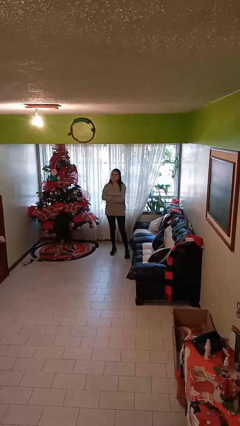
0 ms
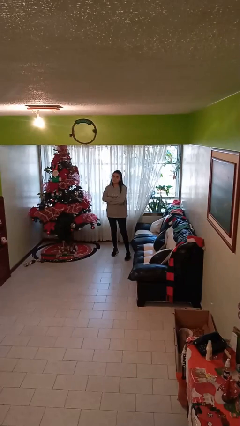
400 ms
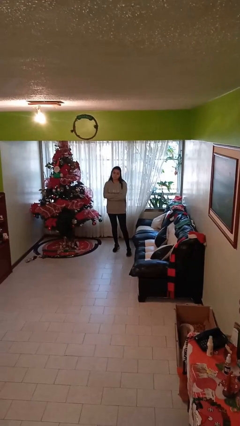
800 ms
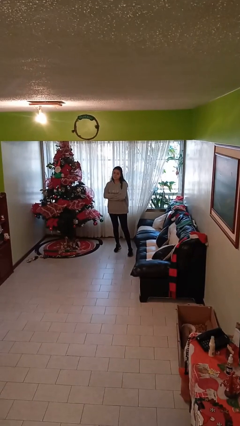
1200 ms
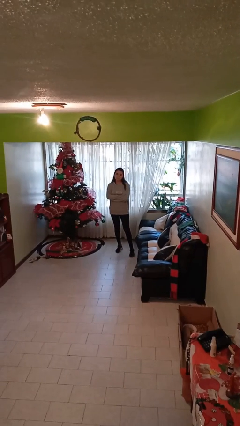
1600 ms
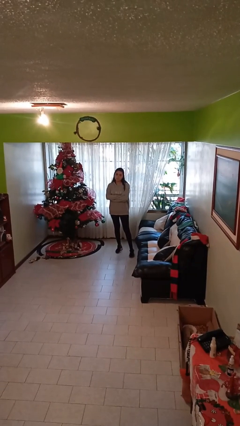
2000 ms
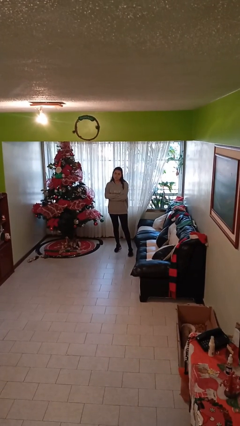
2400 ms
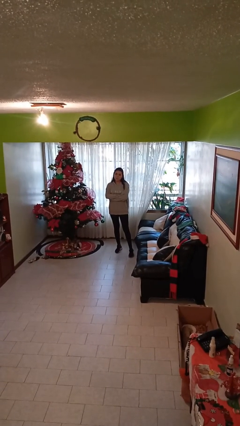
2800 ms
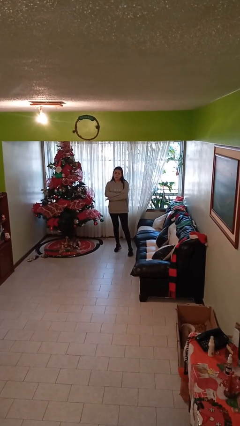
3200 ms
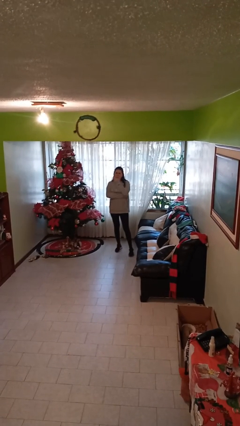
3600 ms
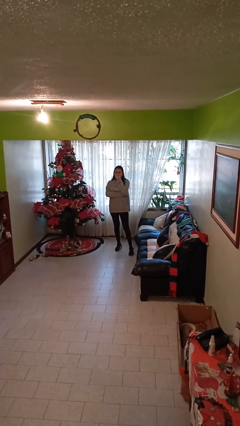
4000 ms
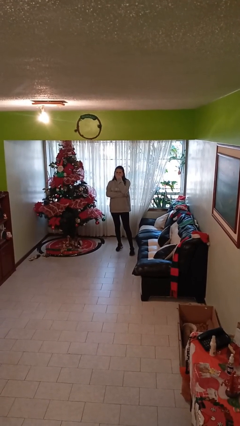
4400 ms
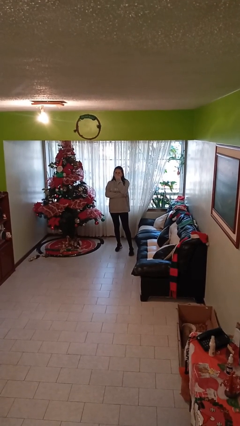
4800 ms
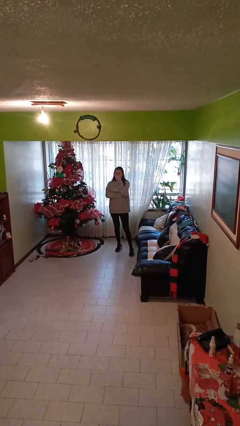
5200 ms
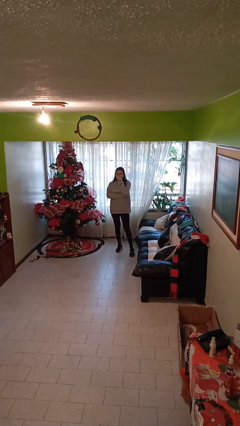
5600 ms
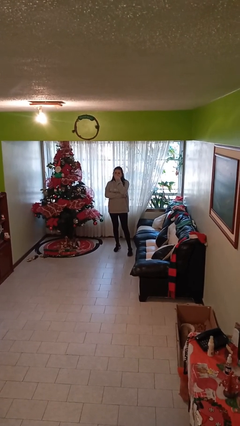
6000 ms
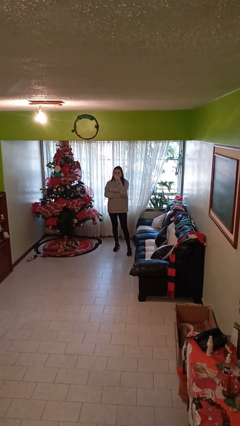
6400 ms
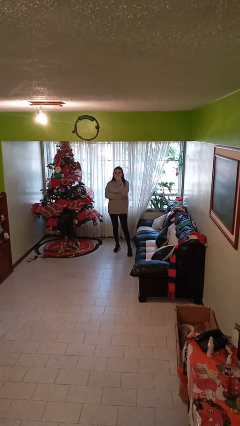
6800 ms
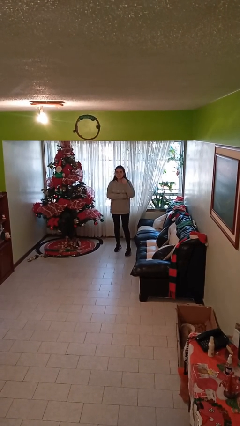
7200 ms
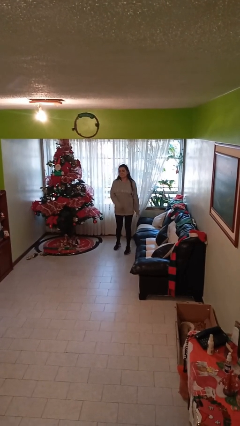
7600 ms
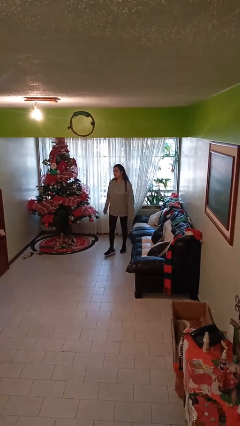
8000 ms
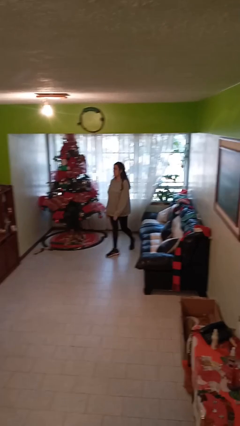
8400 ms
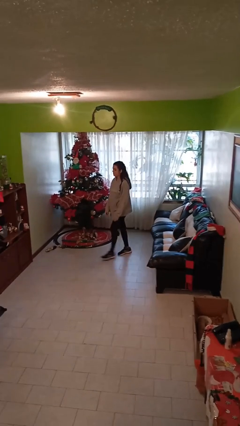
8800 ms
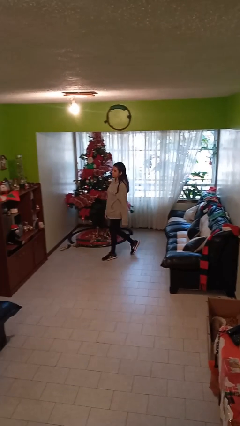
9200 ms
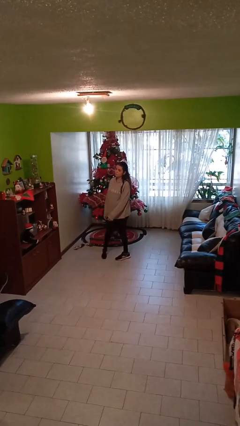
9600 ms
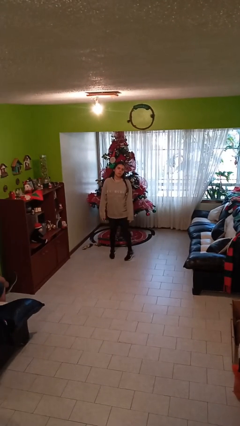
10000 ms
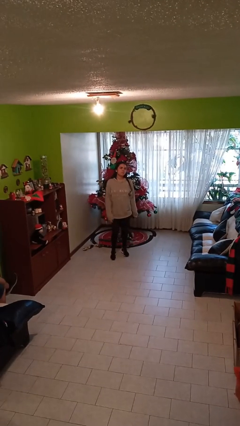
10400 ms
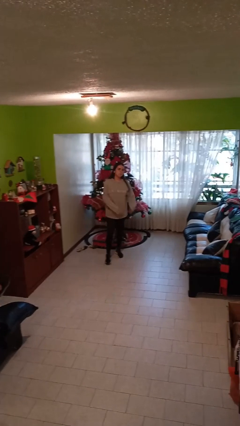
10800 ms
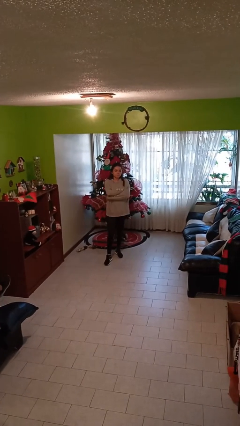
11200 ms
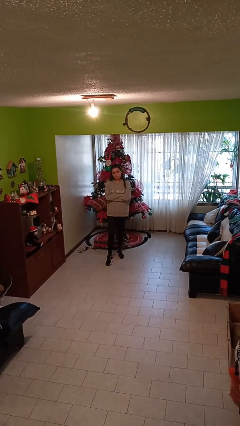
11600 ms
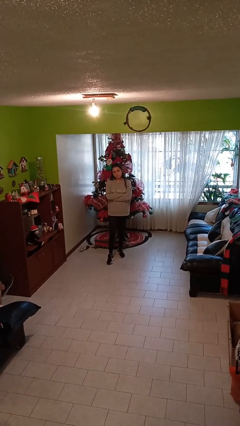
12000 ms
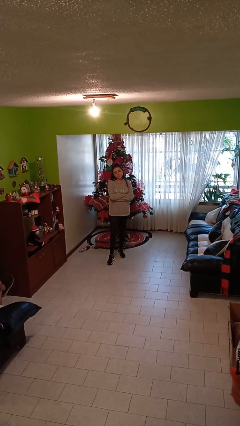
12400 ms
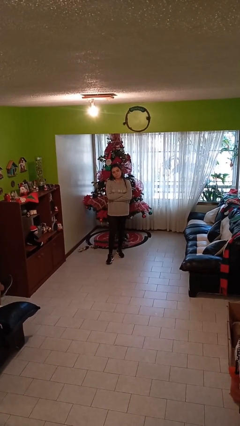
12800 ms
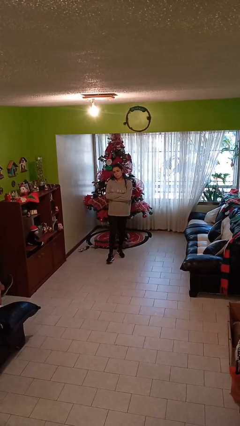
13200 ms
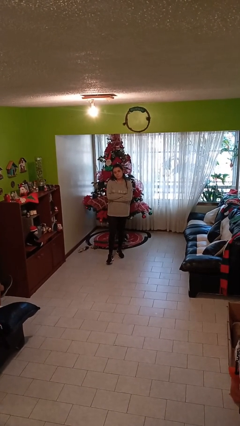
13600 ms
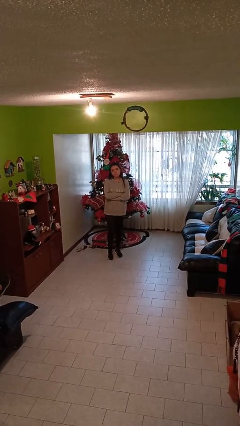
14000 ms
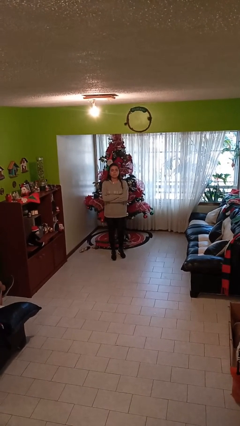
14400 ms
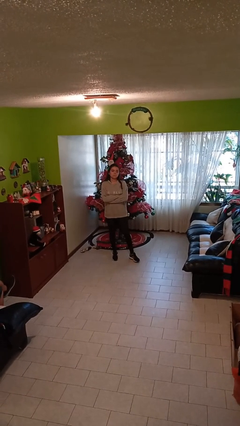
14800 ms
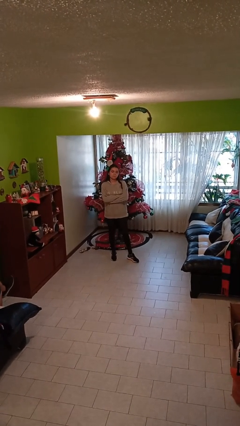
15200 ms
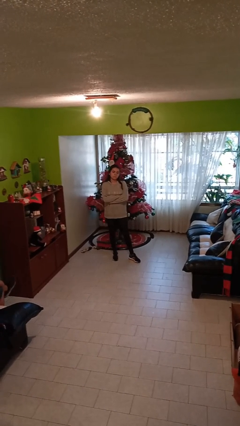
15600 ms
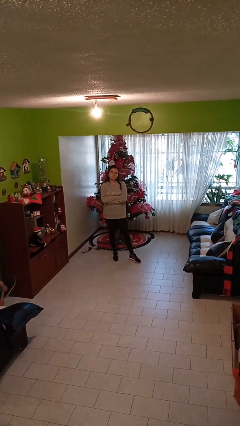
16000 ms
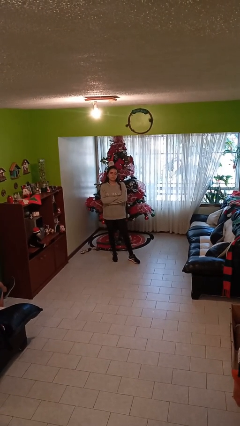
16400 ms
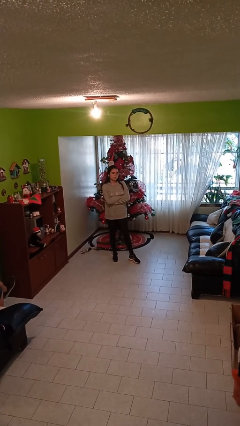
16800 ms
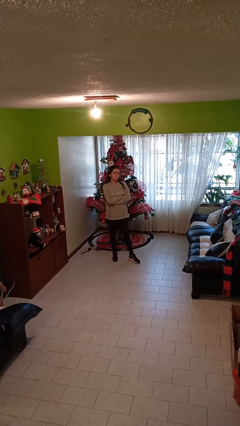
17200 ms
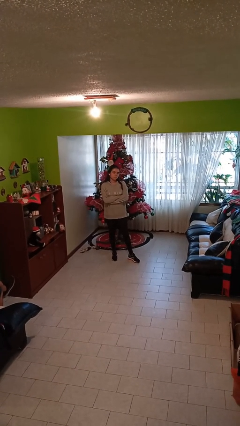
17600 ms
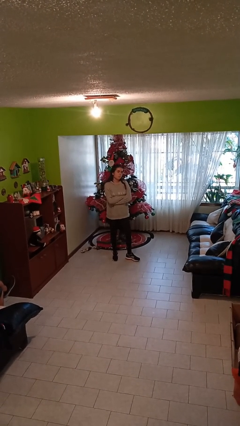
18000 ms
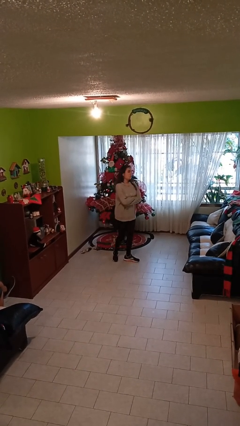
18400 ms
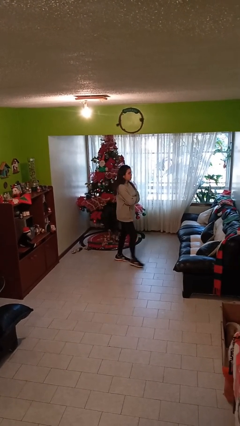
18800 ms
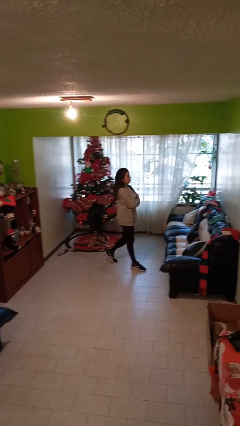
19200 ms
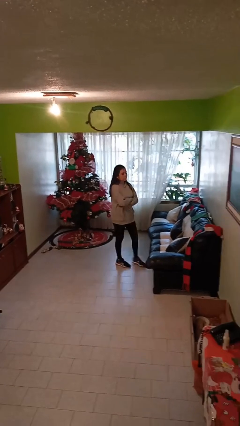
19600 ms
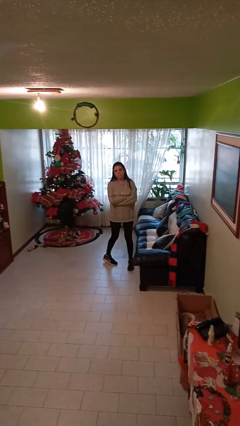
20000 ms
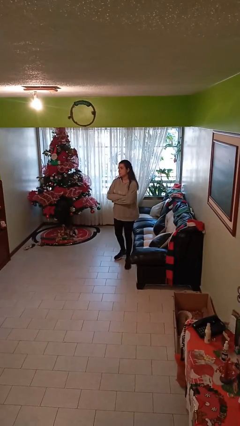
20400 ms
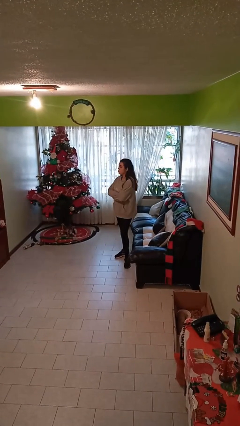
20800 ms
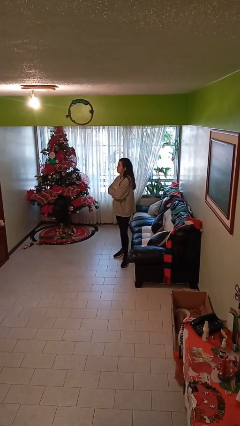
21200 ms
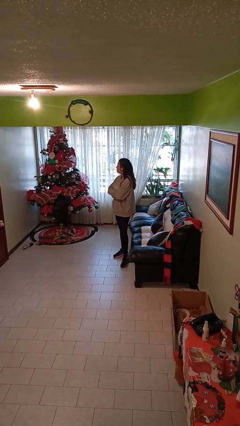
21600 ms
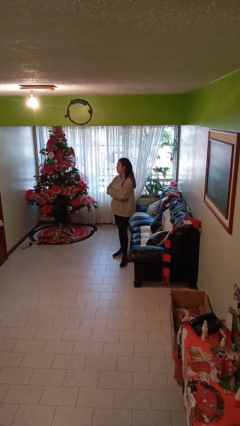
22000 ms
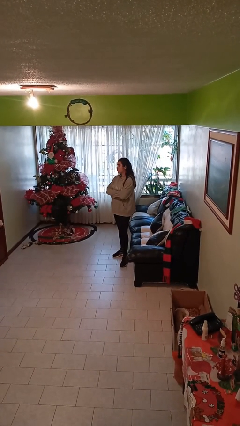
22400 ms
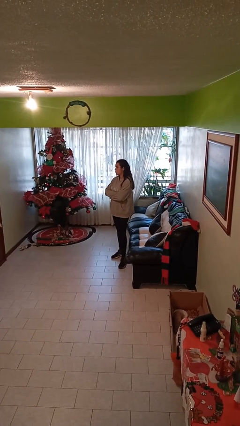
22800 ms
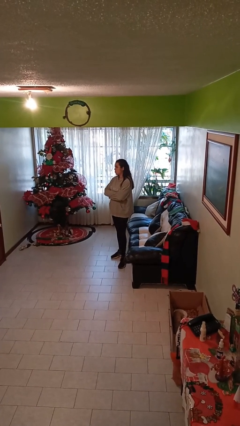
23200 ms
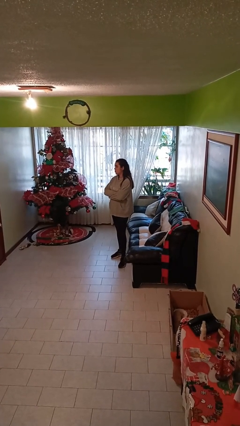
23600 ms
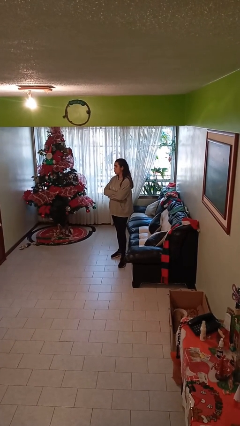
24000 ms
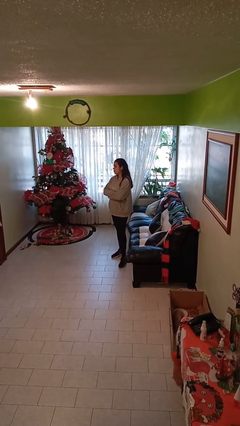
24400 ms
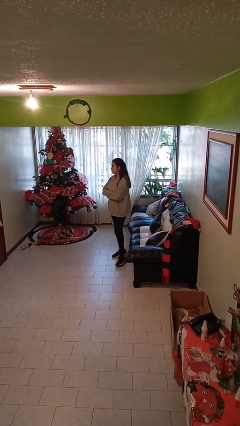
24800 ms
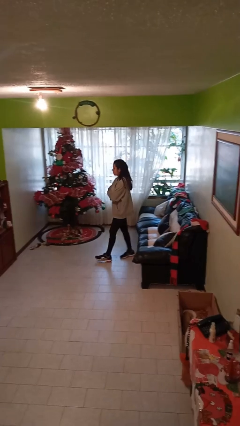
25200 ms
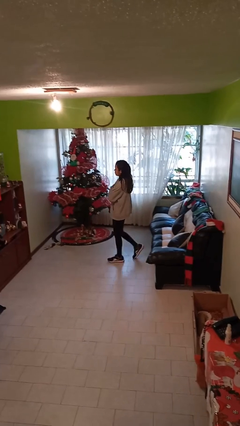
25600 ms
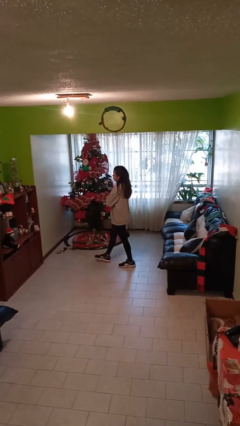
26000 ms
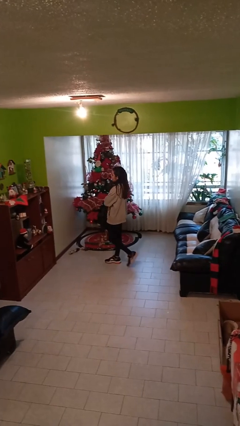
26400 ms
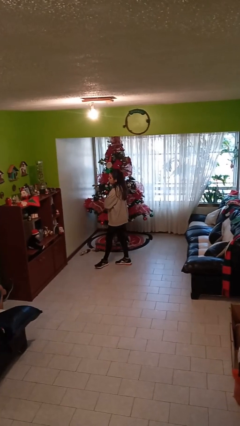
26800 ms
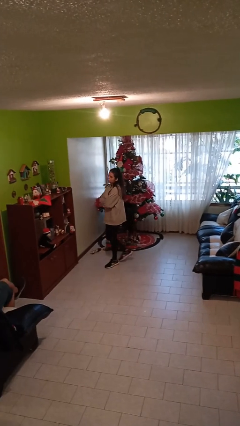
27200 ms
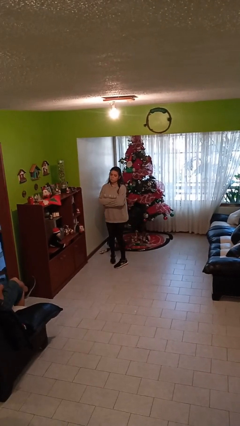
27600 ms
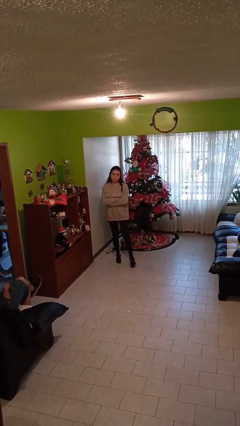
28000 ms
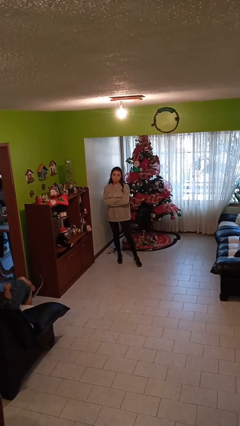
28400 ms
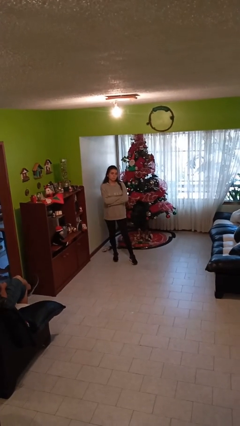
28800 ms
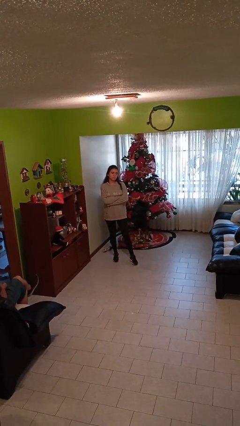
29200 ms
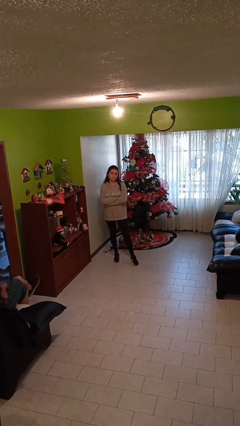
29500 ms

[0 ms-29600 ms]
person walks

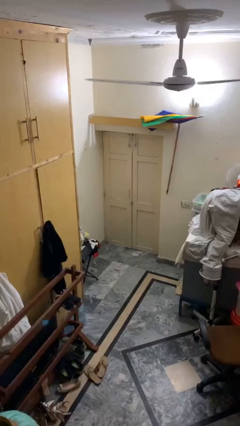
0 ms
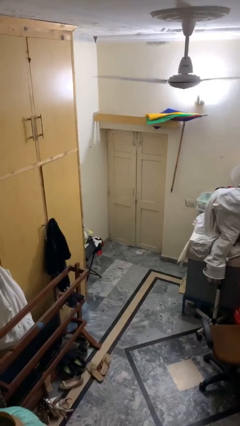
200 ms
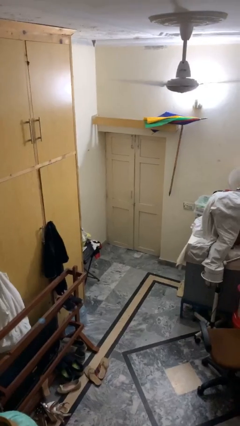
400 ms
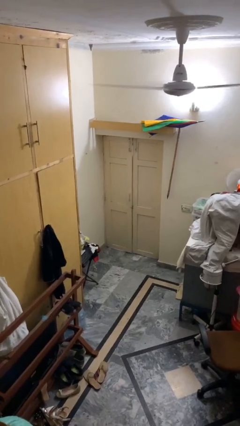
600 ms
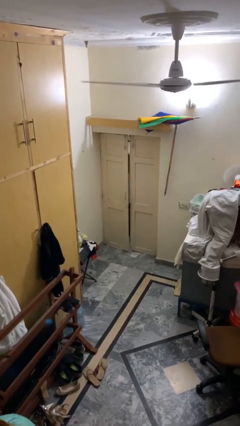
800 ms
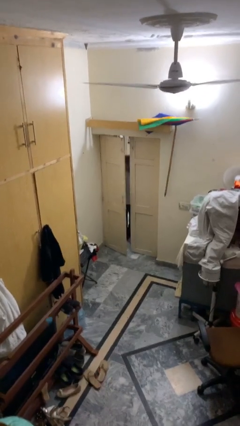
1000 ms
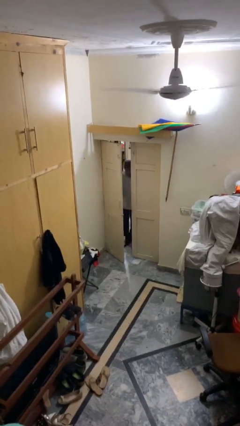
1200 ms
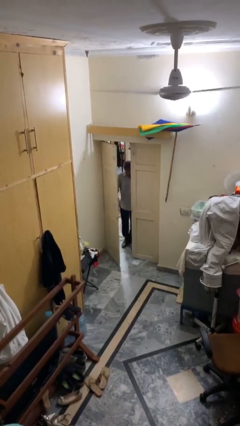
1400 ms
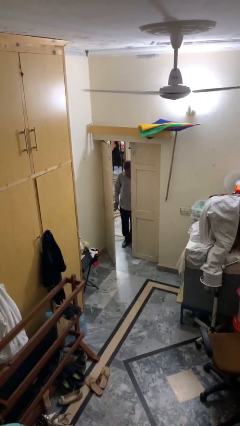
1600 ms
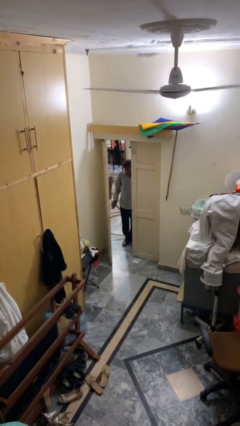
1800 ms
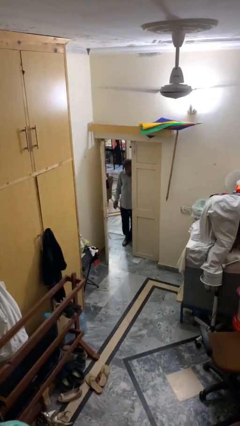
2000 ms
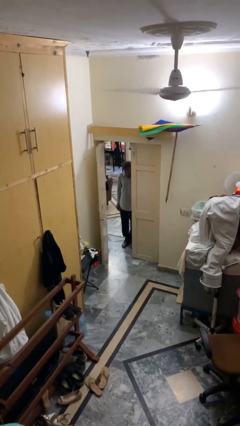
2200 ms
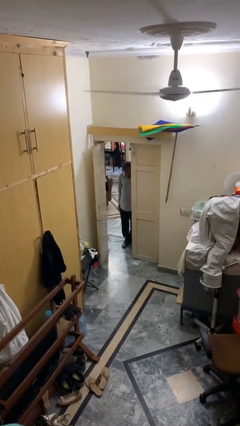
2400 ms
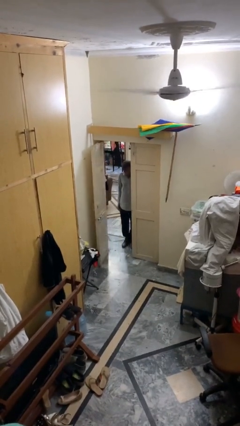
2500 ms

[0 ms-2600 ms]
person opens facility door

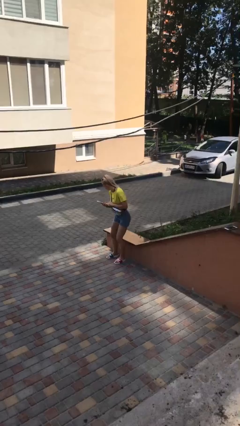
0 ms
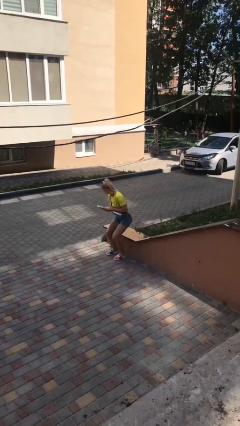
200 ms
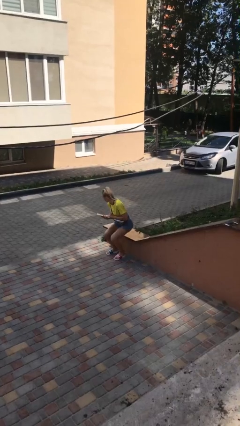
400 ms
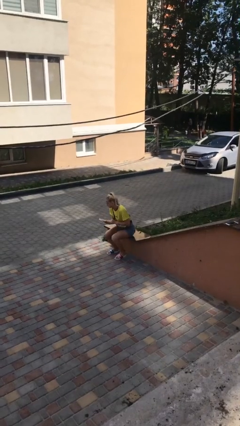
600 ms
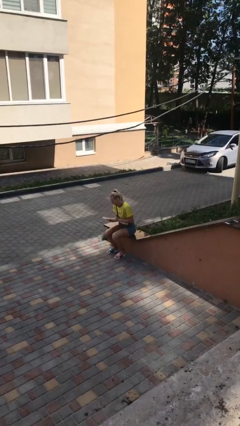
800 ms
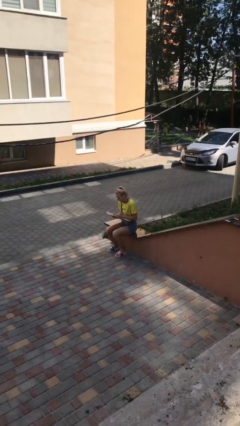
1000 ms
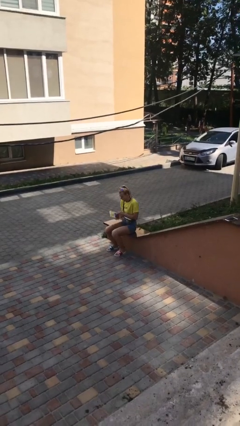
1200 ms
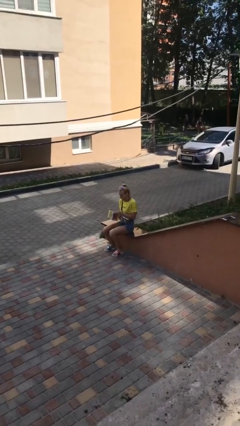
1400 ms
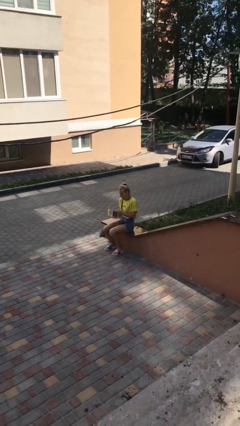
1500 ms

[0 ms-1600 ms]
person sits down
